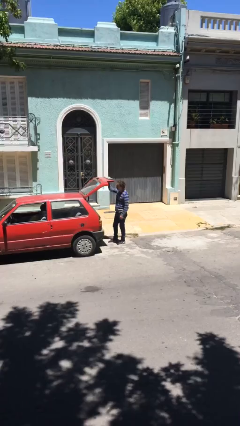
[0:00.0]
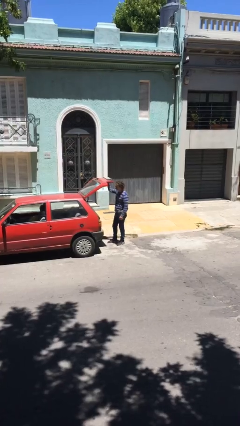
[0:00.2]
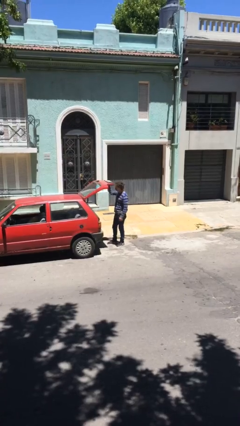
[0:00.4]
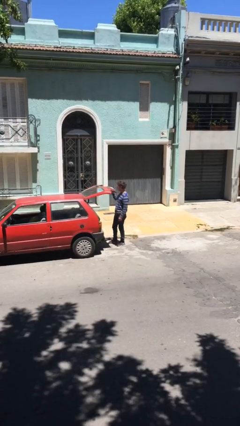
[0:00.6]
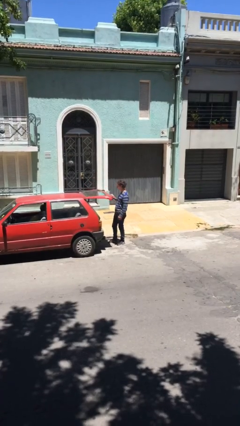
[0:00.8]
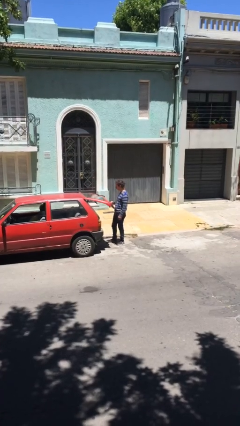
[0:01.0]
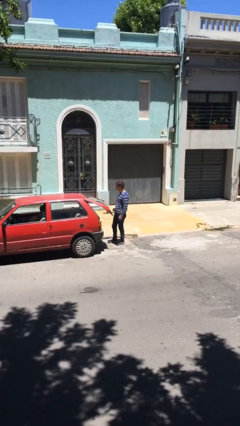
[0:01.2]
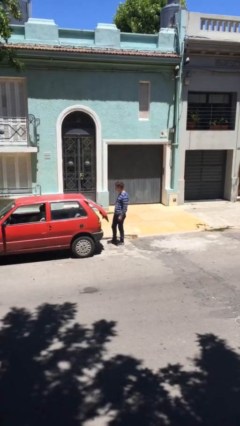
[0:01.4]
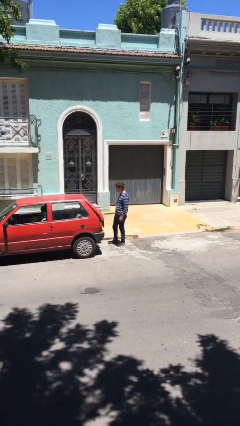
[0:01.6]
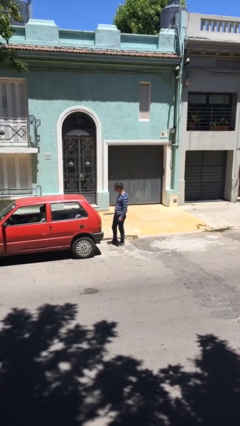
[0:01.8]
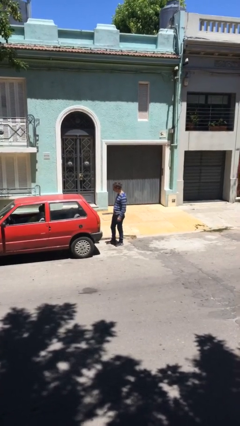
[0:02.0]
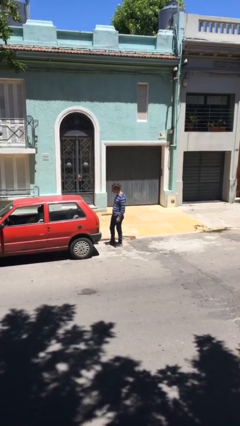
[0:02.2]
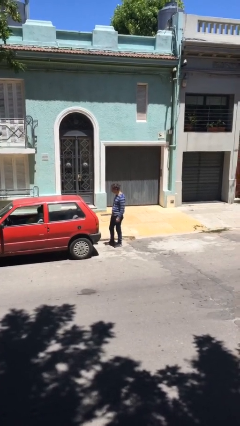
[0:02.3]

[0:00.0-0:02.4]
person closes car trunk

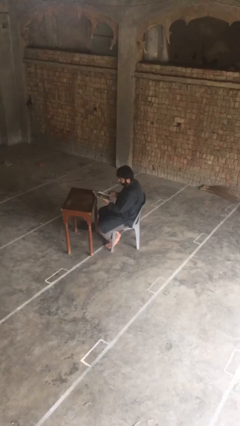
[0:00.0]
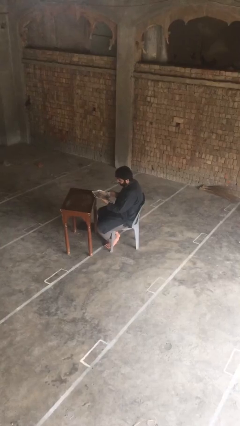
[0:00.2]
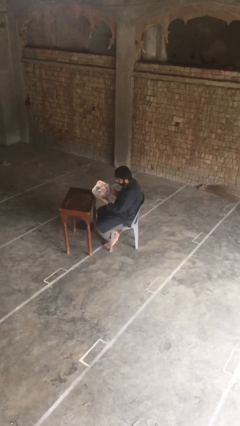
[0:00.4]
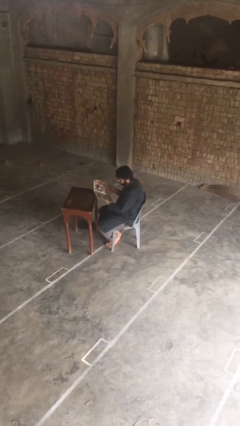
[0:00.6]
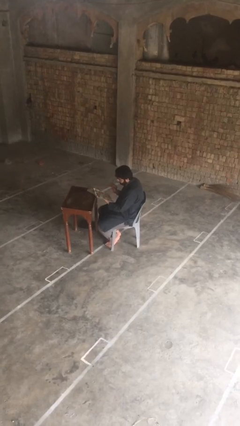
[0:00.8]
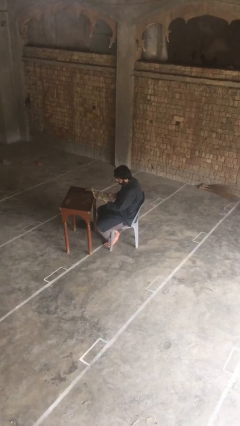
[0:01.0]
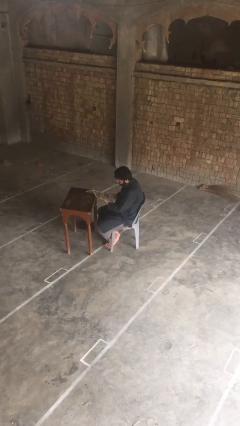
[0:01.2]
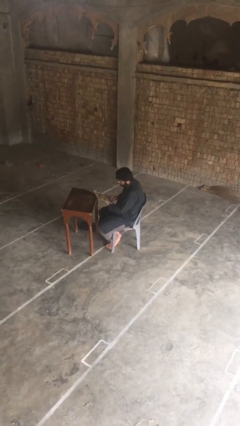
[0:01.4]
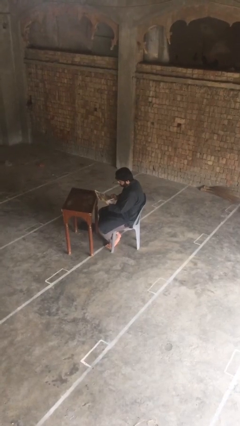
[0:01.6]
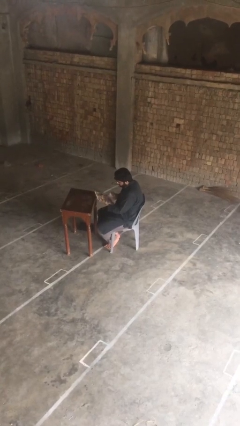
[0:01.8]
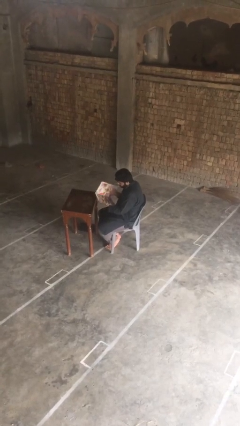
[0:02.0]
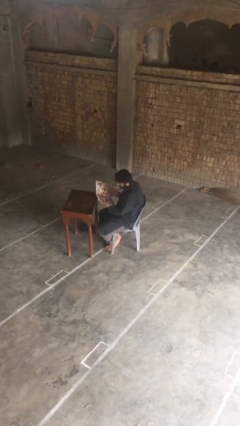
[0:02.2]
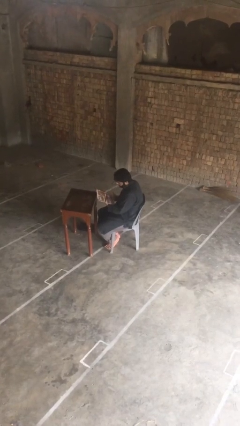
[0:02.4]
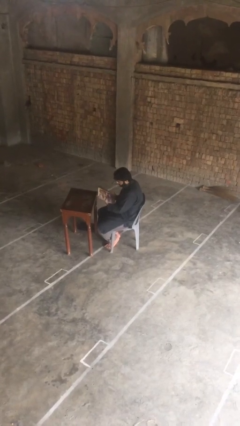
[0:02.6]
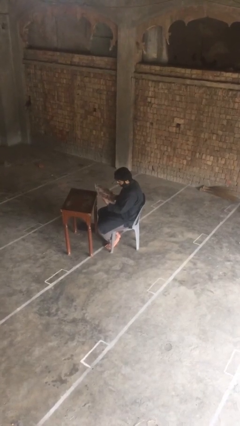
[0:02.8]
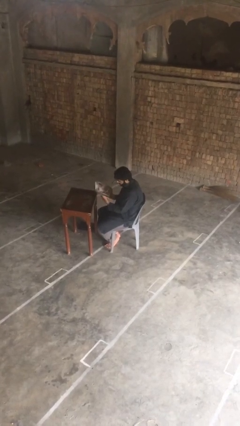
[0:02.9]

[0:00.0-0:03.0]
person reads document

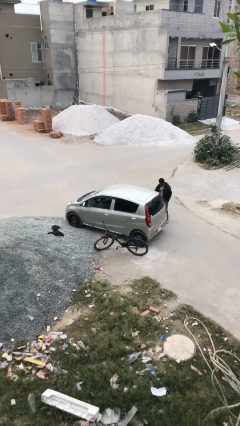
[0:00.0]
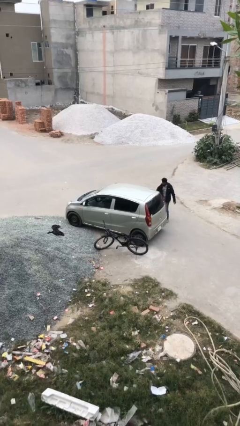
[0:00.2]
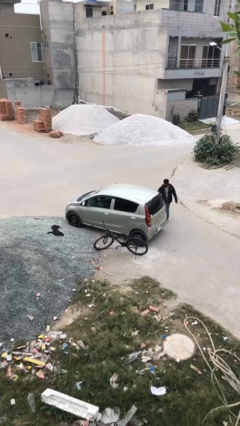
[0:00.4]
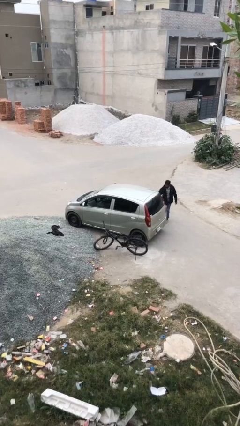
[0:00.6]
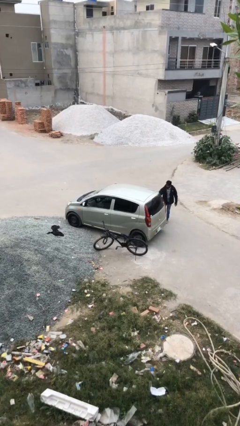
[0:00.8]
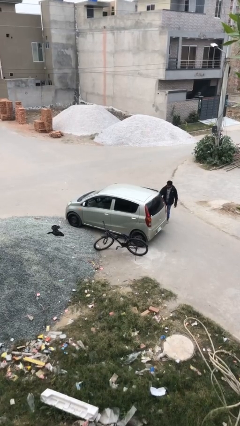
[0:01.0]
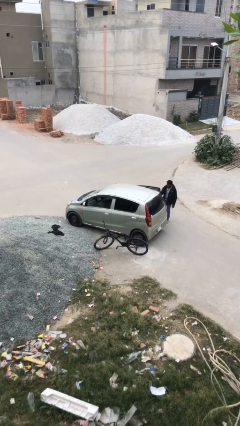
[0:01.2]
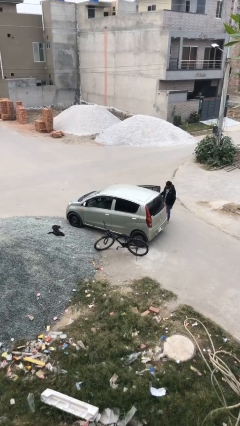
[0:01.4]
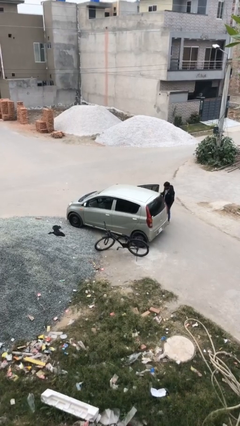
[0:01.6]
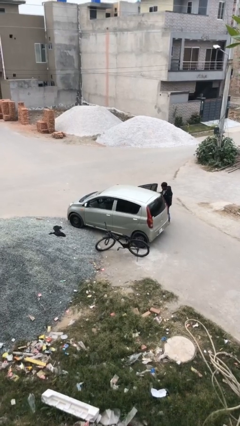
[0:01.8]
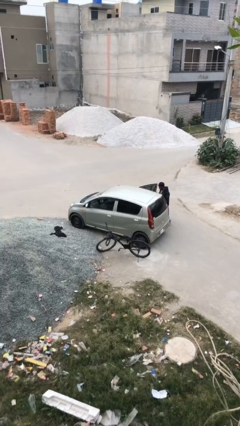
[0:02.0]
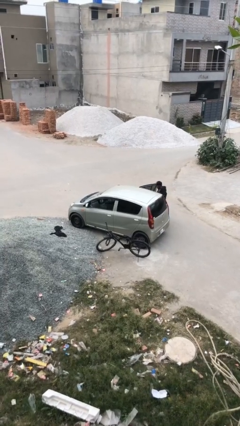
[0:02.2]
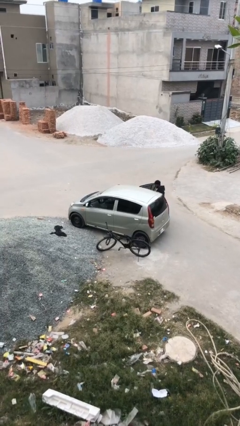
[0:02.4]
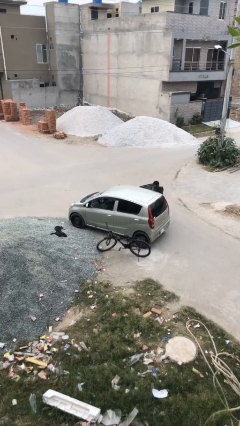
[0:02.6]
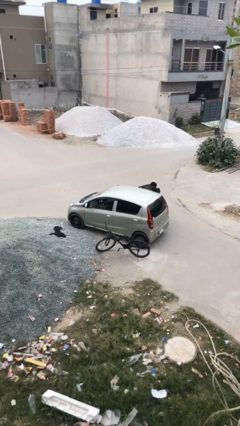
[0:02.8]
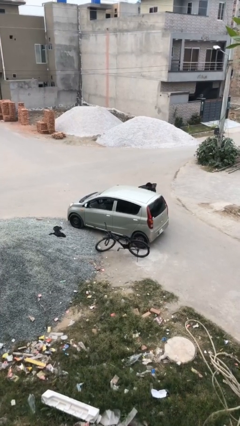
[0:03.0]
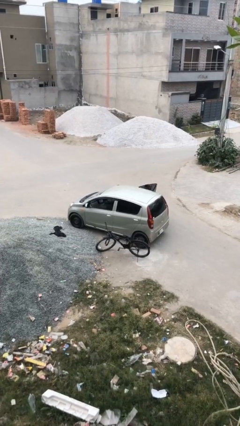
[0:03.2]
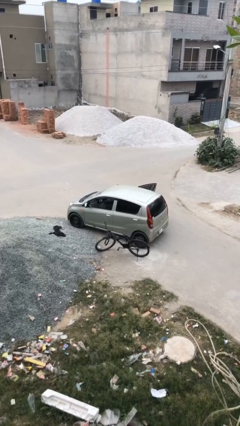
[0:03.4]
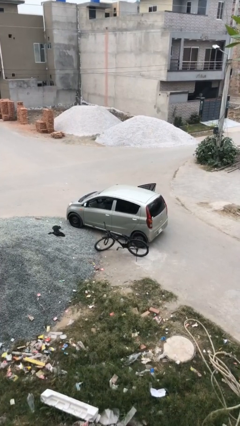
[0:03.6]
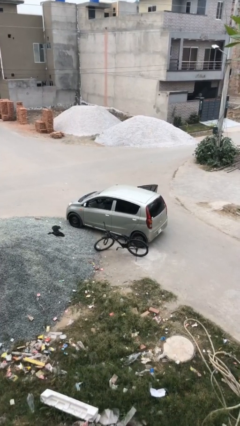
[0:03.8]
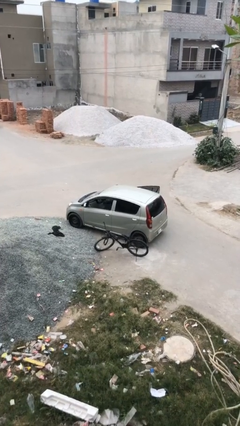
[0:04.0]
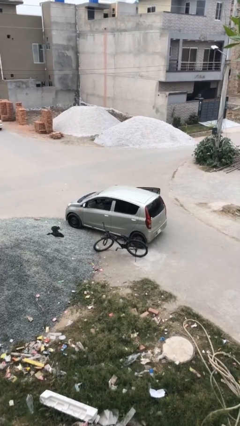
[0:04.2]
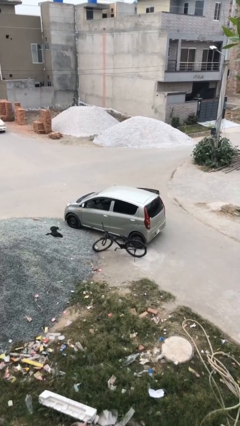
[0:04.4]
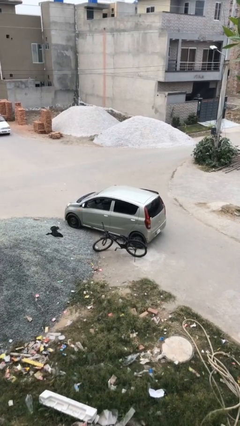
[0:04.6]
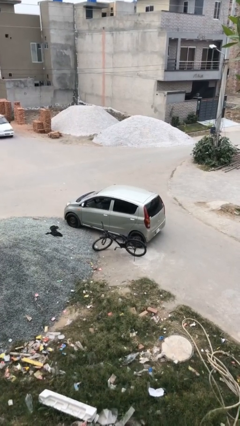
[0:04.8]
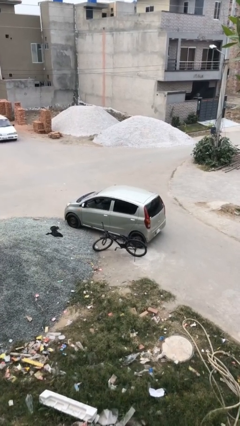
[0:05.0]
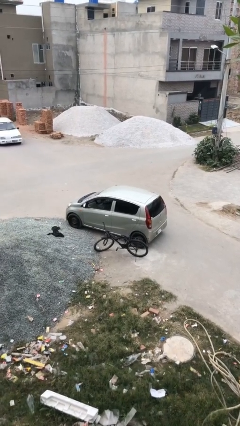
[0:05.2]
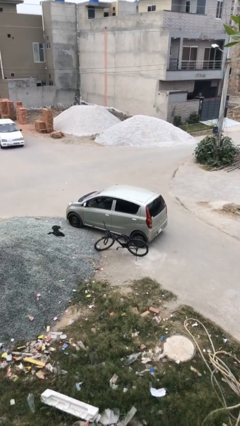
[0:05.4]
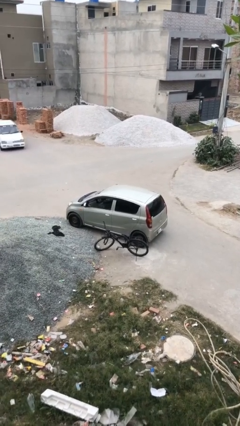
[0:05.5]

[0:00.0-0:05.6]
car picks up person

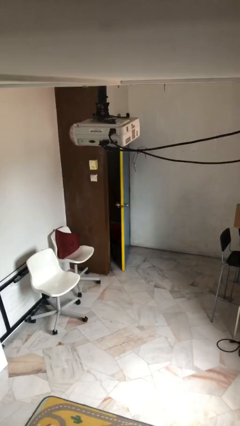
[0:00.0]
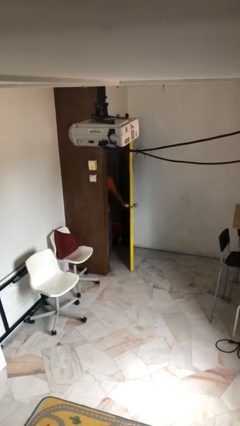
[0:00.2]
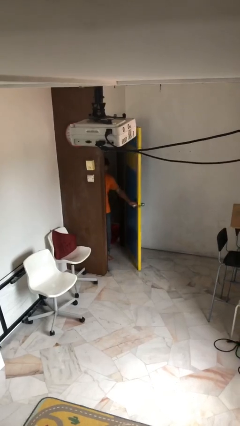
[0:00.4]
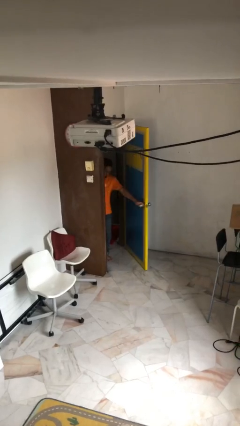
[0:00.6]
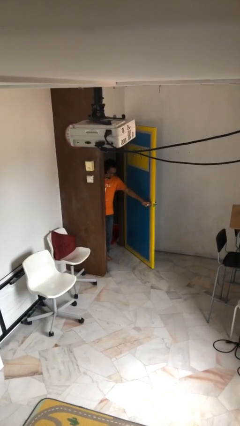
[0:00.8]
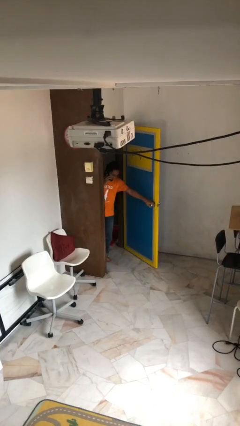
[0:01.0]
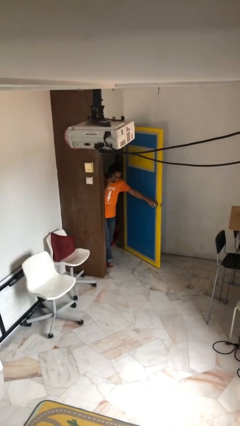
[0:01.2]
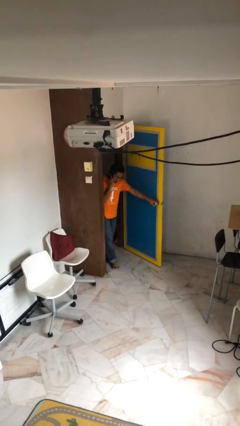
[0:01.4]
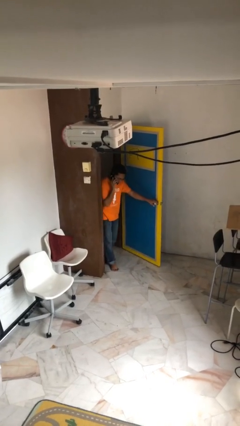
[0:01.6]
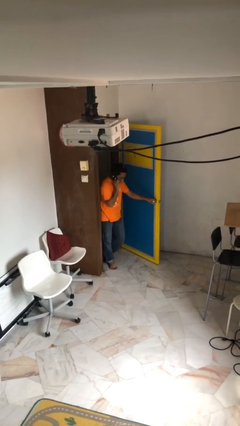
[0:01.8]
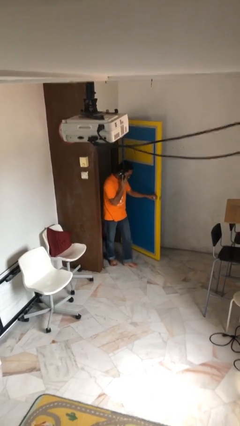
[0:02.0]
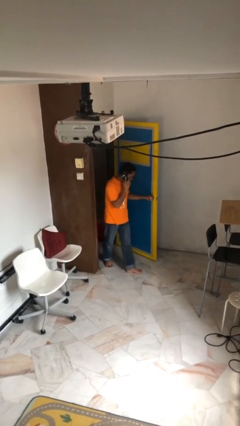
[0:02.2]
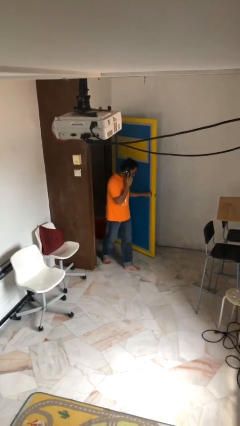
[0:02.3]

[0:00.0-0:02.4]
person opens facility door

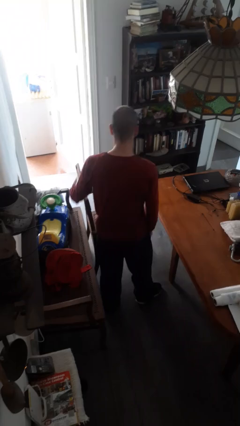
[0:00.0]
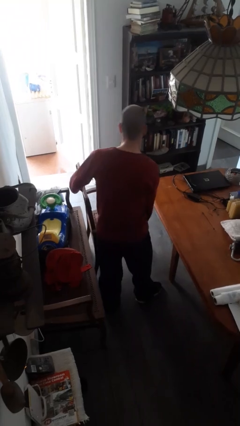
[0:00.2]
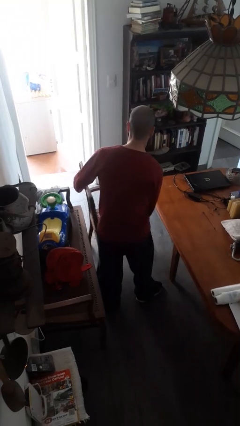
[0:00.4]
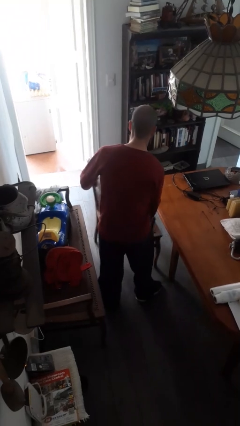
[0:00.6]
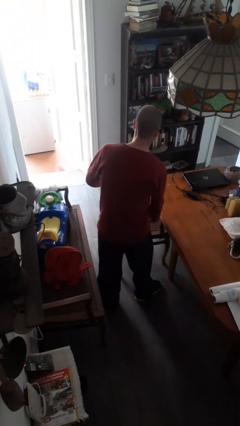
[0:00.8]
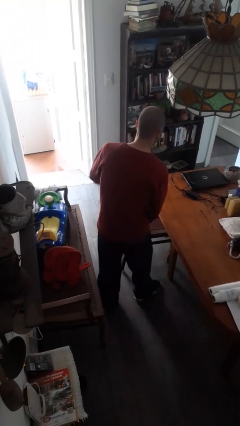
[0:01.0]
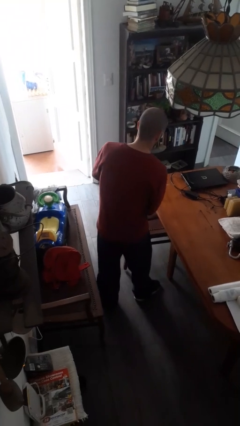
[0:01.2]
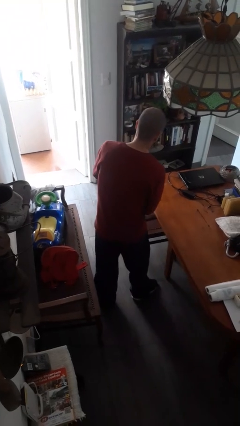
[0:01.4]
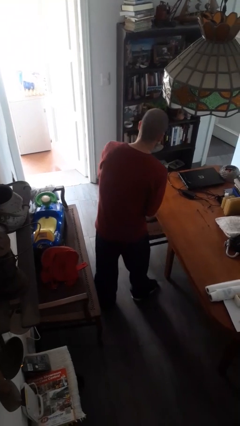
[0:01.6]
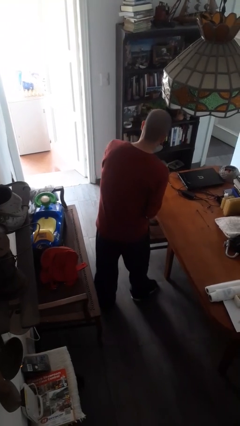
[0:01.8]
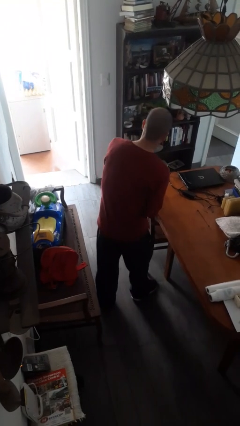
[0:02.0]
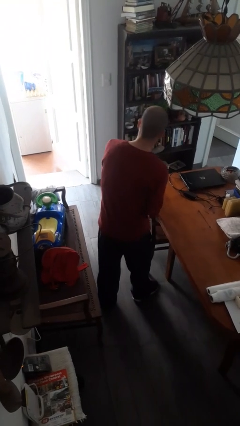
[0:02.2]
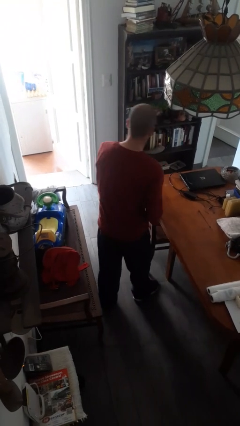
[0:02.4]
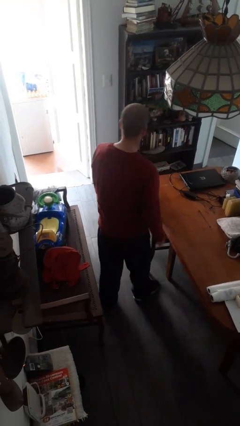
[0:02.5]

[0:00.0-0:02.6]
person pushes in chair

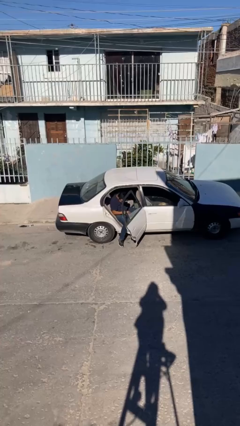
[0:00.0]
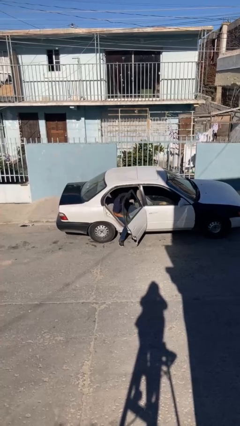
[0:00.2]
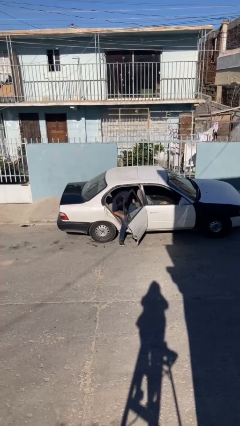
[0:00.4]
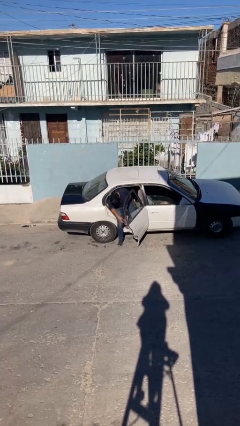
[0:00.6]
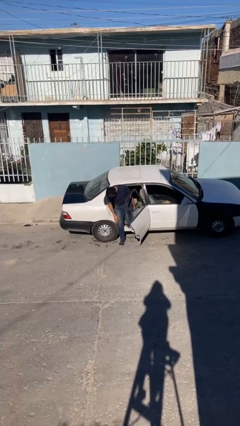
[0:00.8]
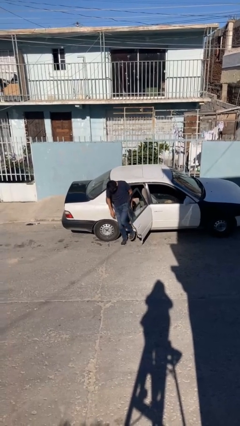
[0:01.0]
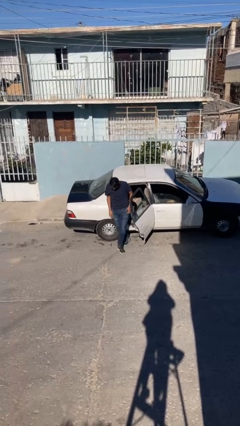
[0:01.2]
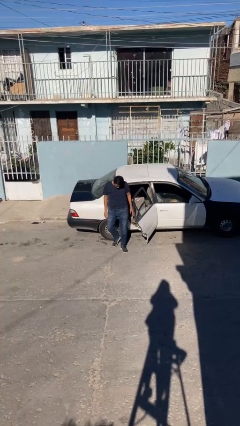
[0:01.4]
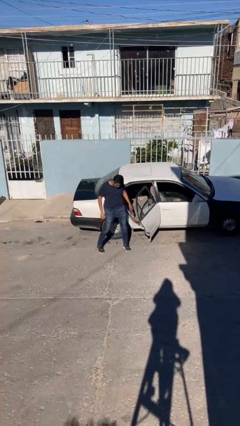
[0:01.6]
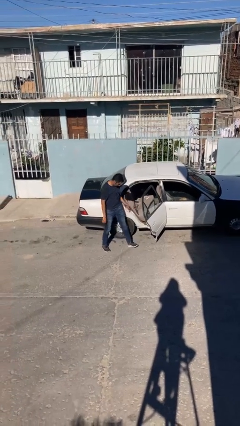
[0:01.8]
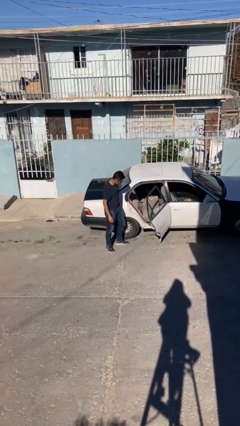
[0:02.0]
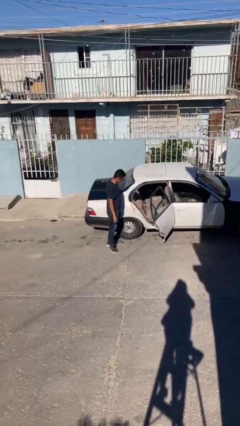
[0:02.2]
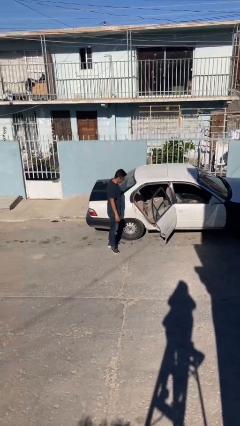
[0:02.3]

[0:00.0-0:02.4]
person exits car
